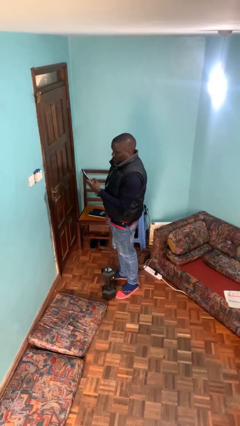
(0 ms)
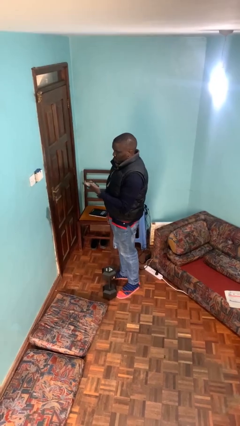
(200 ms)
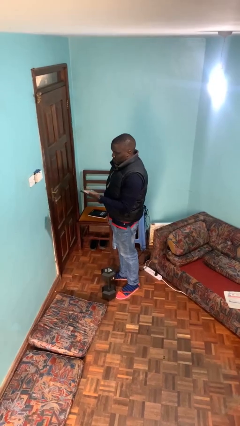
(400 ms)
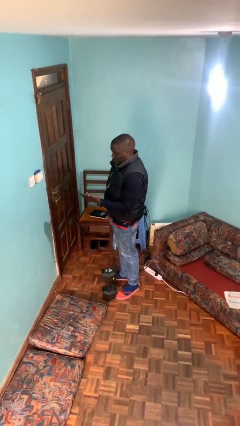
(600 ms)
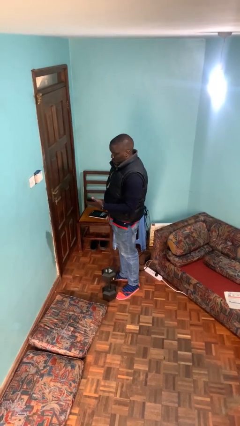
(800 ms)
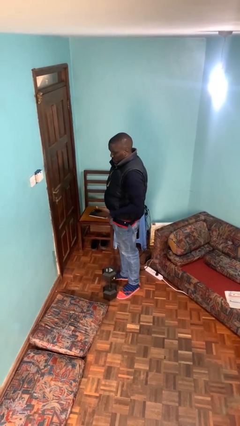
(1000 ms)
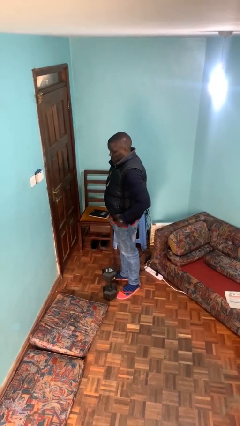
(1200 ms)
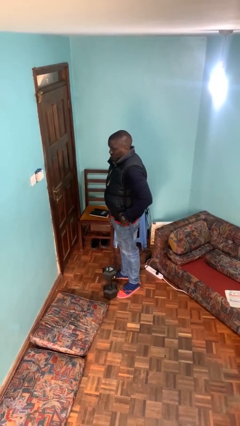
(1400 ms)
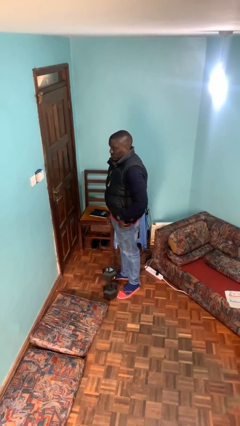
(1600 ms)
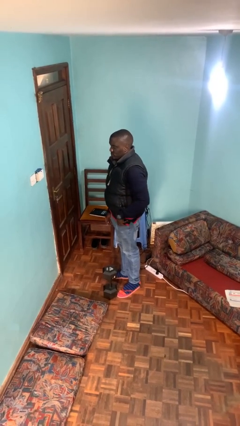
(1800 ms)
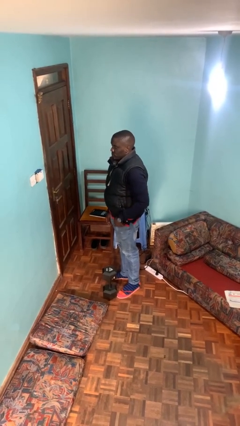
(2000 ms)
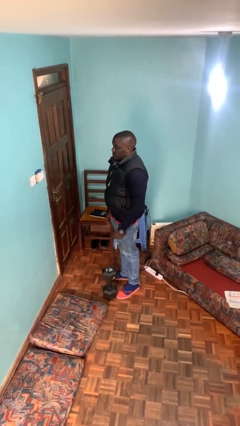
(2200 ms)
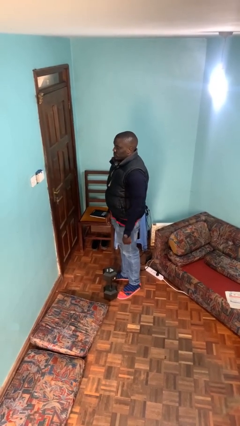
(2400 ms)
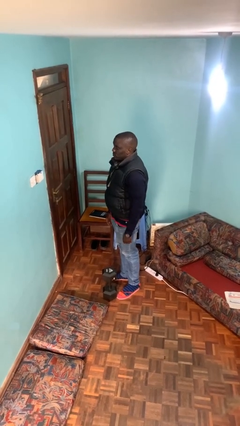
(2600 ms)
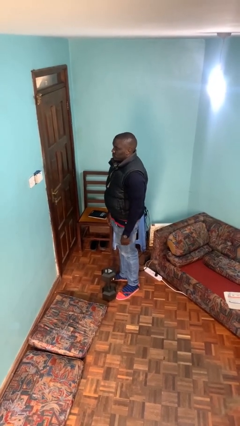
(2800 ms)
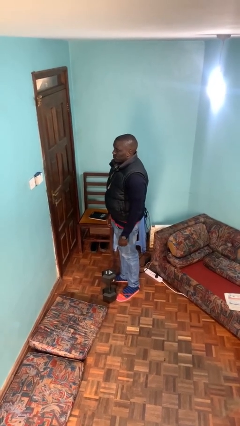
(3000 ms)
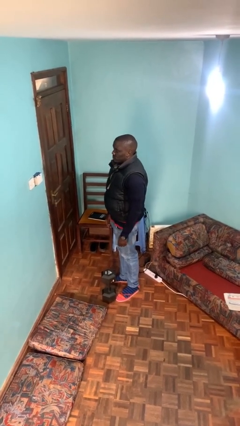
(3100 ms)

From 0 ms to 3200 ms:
person puts phone into pocket

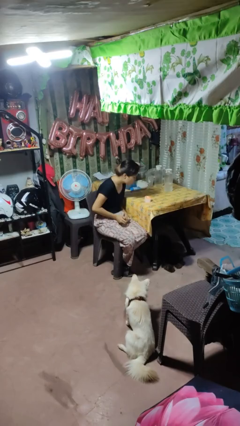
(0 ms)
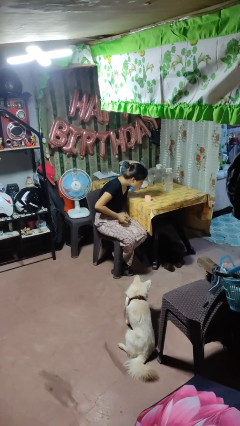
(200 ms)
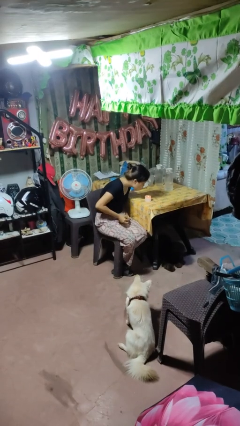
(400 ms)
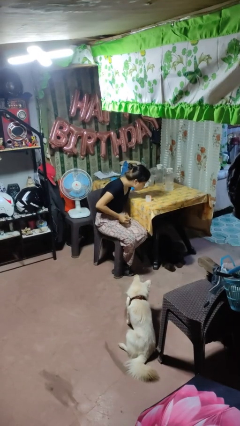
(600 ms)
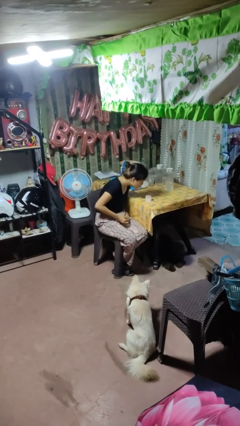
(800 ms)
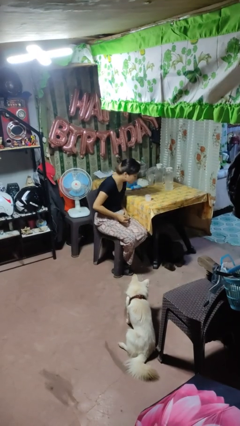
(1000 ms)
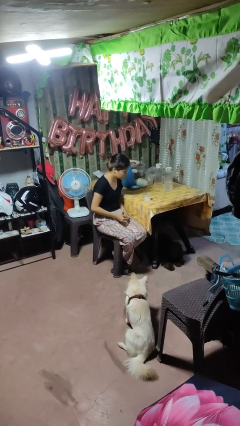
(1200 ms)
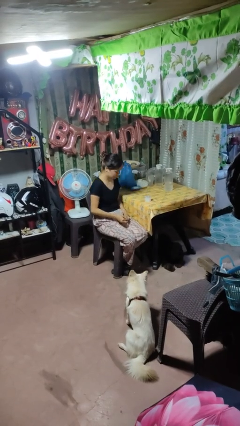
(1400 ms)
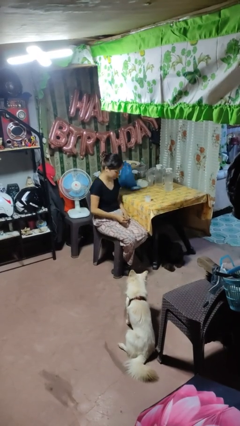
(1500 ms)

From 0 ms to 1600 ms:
person extinguishes candle

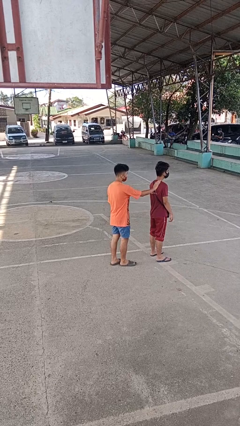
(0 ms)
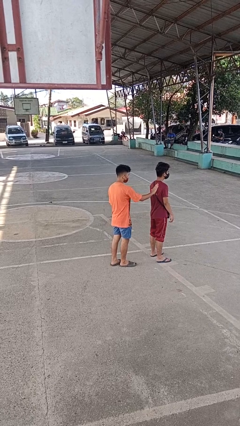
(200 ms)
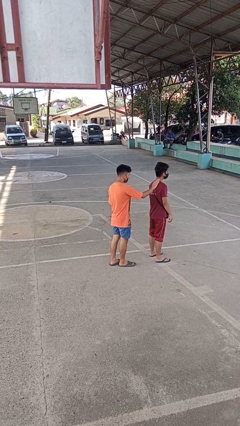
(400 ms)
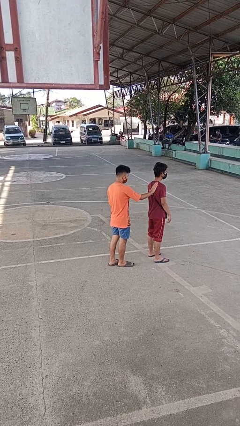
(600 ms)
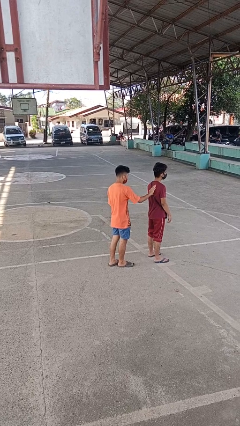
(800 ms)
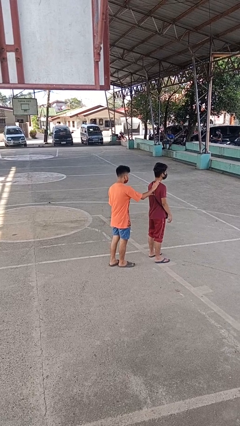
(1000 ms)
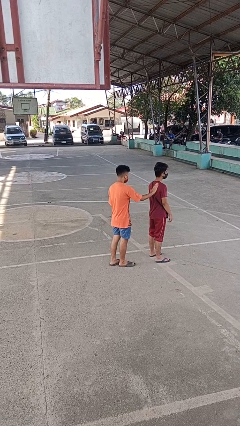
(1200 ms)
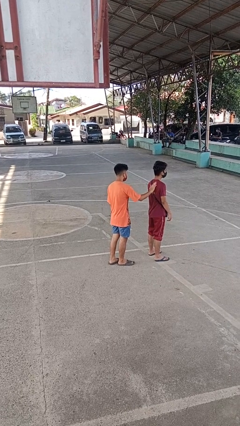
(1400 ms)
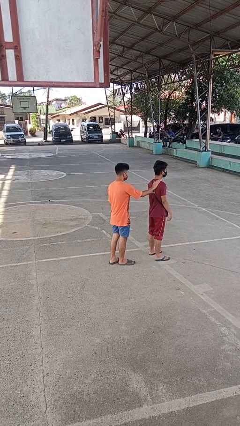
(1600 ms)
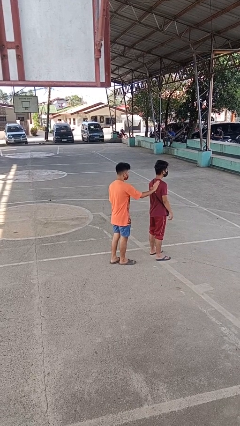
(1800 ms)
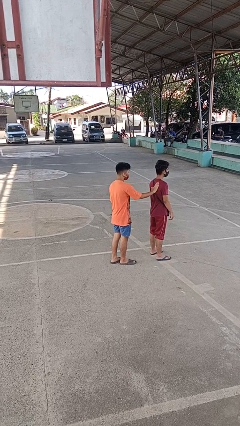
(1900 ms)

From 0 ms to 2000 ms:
person touches back of person

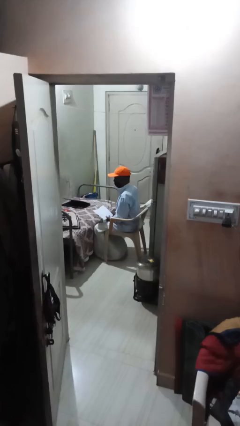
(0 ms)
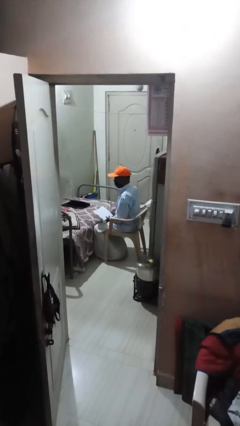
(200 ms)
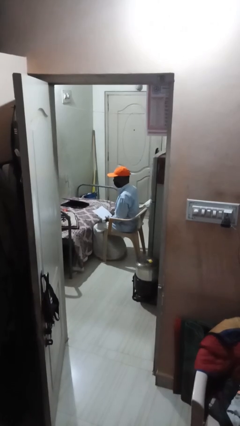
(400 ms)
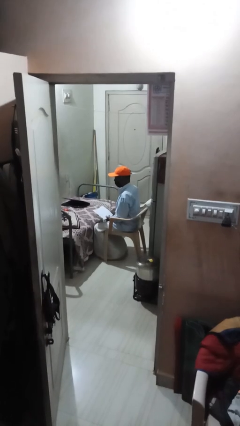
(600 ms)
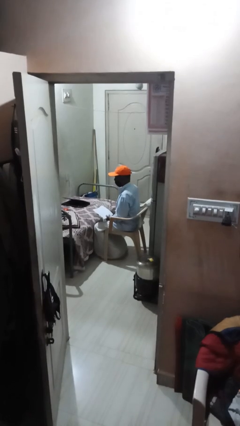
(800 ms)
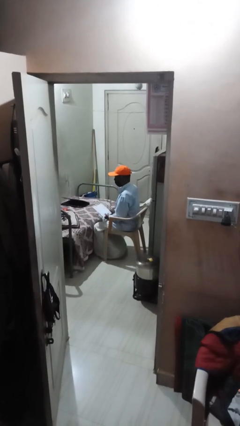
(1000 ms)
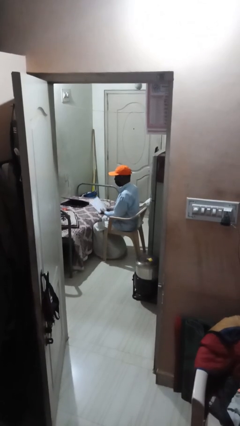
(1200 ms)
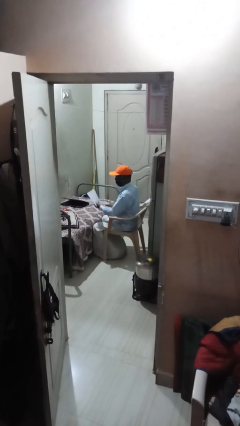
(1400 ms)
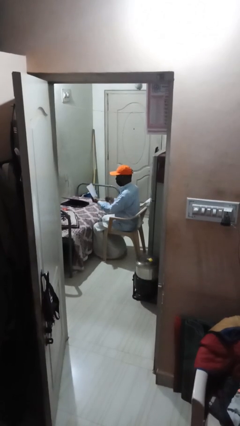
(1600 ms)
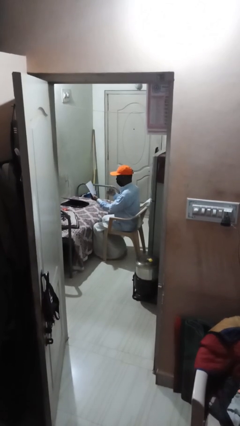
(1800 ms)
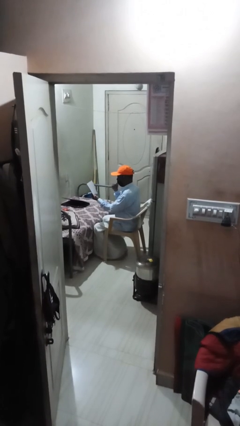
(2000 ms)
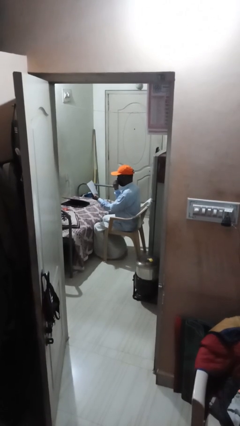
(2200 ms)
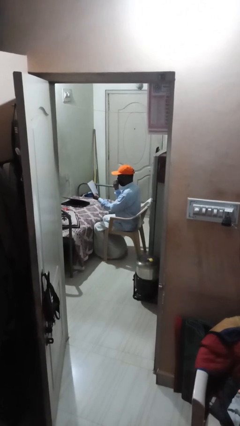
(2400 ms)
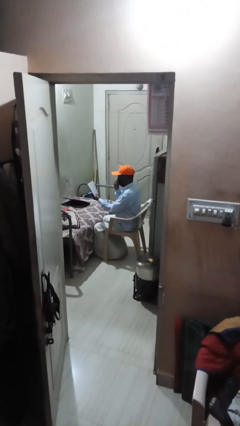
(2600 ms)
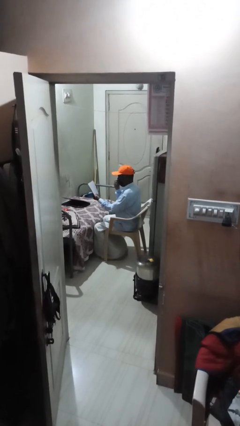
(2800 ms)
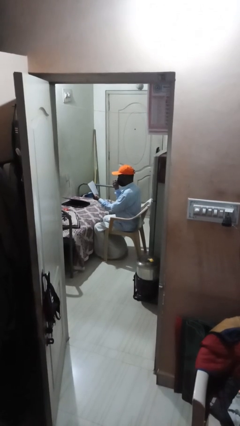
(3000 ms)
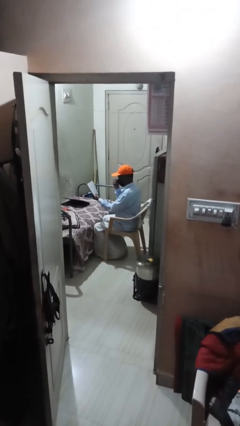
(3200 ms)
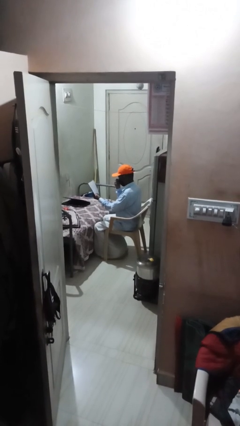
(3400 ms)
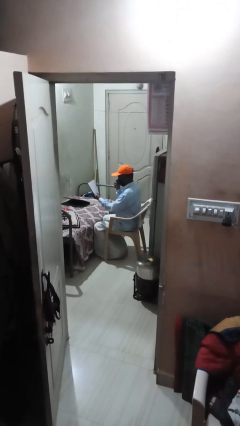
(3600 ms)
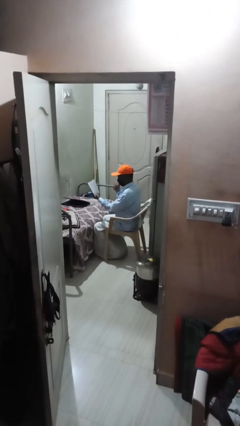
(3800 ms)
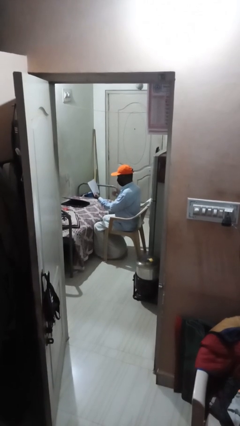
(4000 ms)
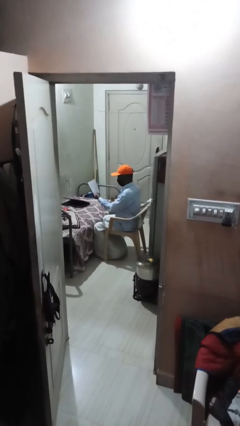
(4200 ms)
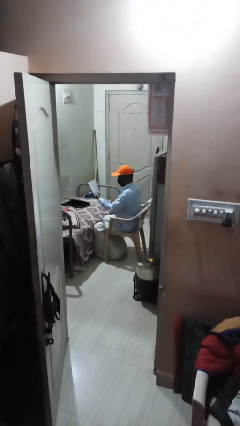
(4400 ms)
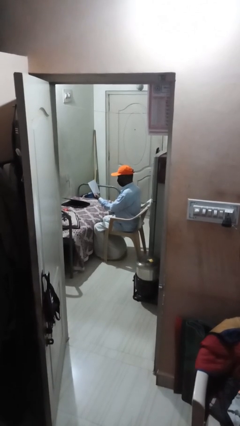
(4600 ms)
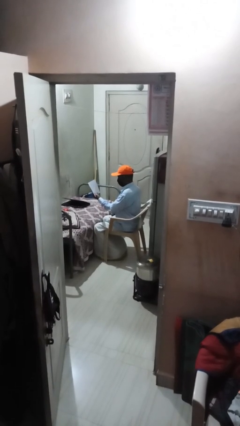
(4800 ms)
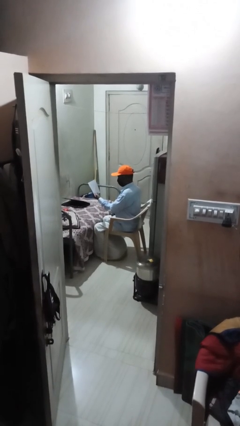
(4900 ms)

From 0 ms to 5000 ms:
person reads document

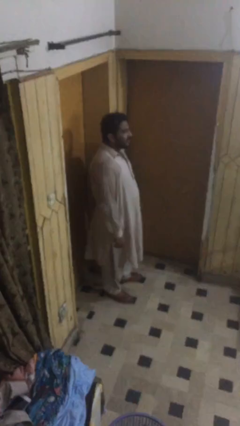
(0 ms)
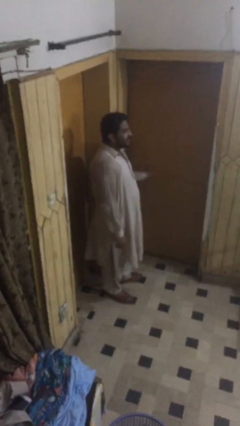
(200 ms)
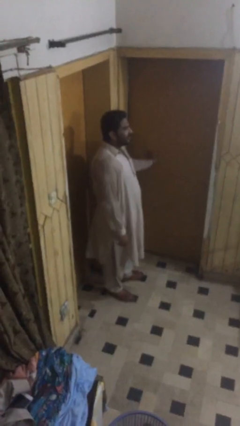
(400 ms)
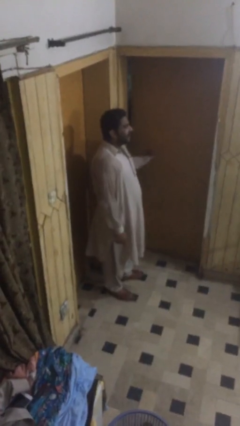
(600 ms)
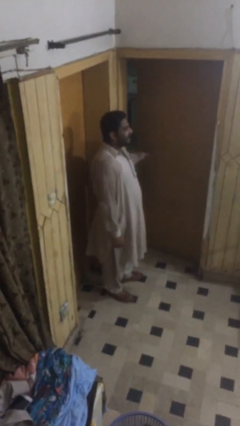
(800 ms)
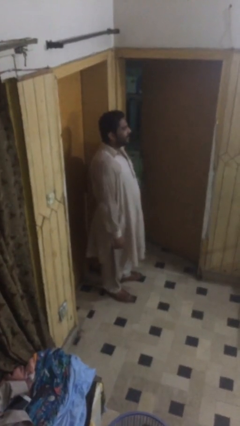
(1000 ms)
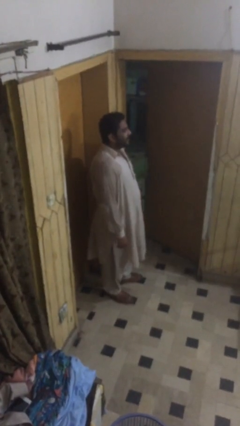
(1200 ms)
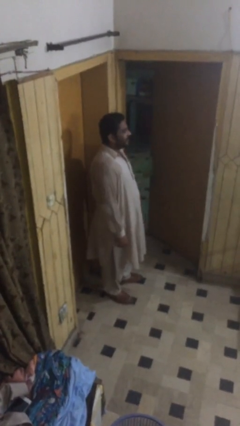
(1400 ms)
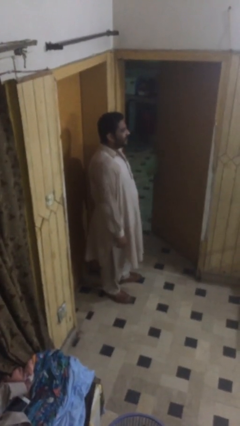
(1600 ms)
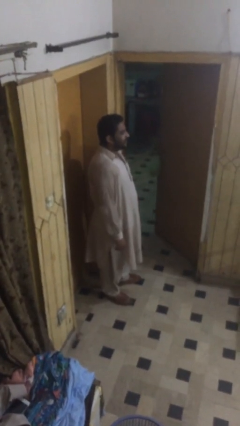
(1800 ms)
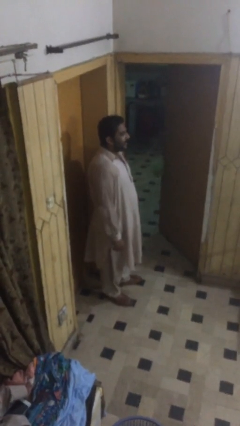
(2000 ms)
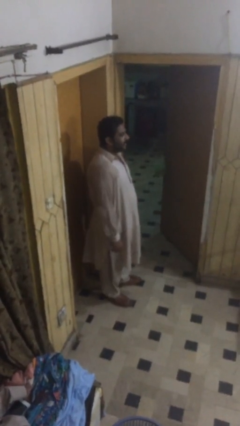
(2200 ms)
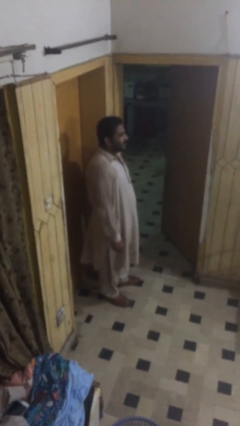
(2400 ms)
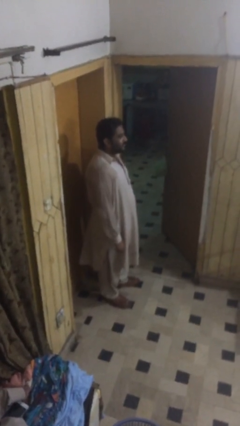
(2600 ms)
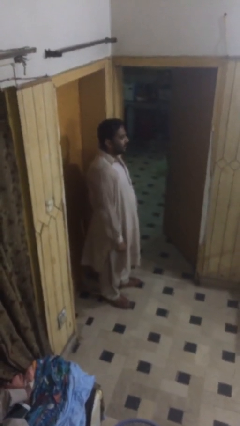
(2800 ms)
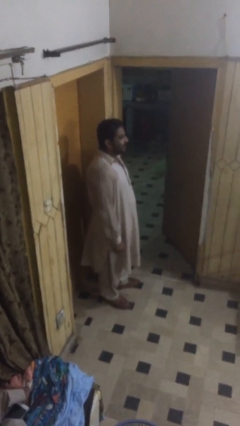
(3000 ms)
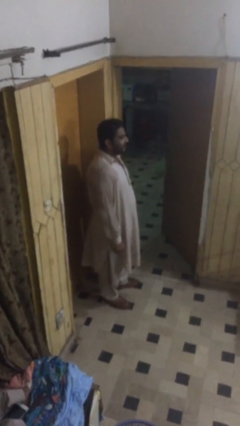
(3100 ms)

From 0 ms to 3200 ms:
person opens facility door

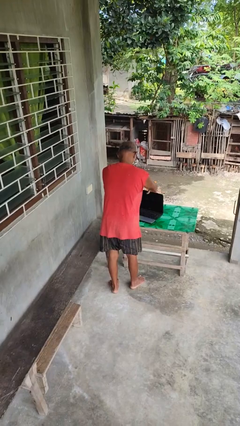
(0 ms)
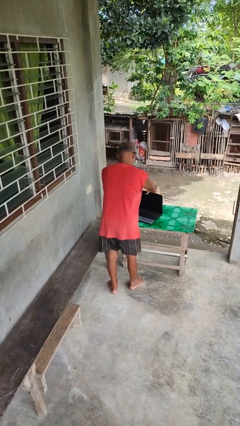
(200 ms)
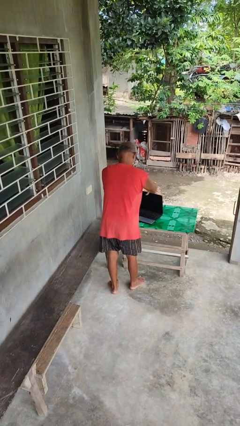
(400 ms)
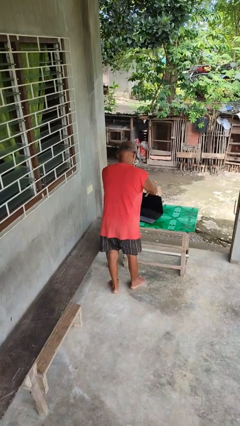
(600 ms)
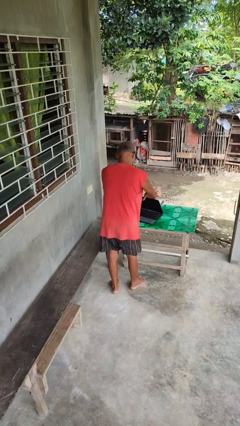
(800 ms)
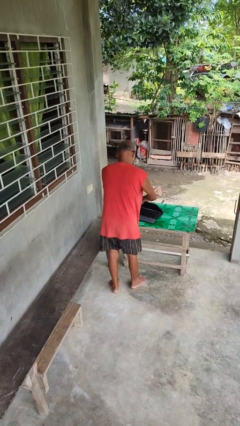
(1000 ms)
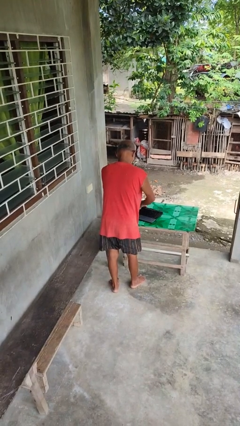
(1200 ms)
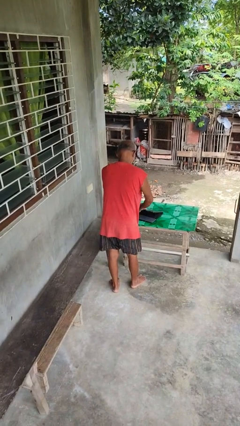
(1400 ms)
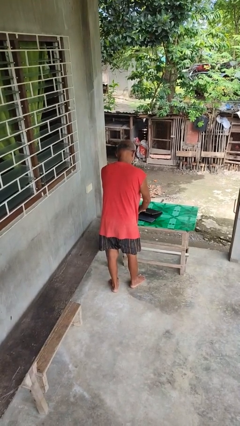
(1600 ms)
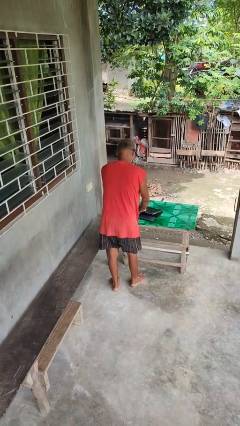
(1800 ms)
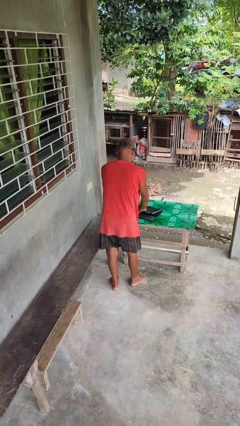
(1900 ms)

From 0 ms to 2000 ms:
person closes laptop
